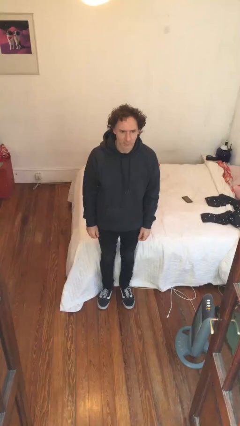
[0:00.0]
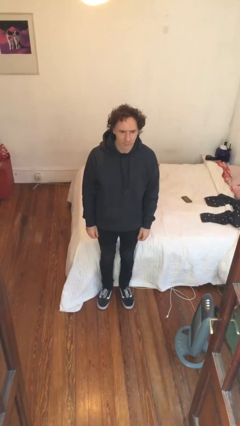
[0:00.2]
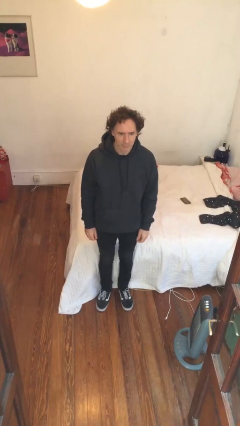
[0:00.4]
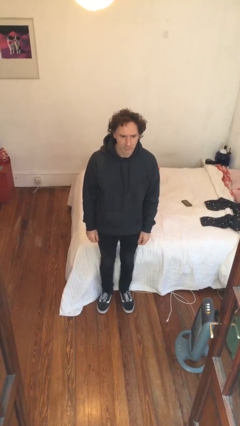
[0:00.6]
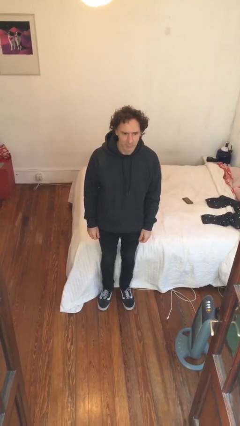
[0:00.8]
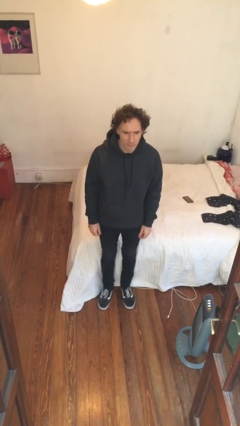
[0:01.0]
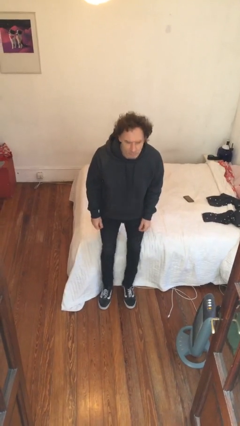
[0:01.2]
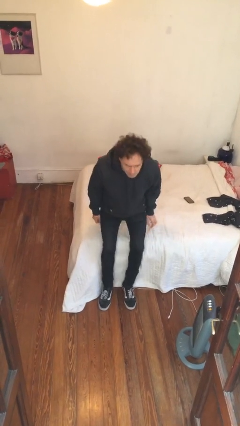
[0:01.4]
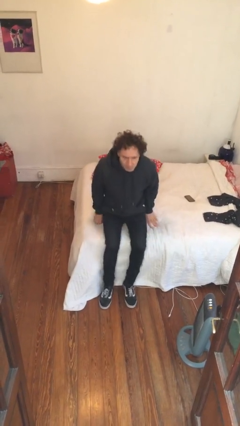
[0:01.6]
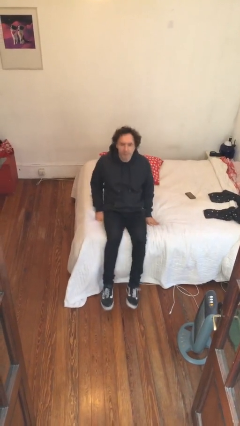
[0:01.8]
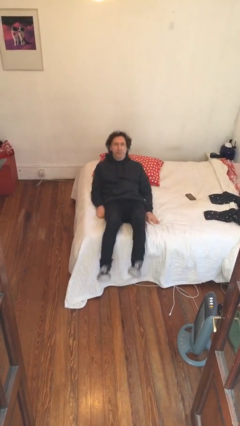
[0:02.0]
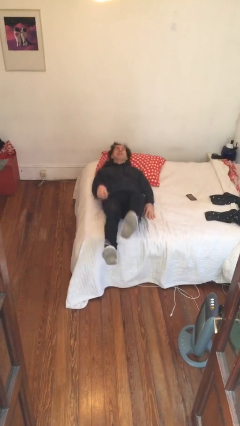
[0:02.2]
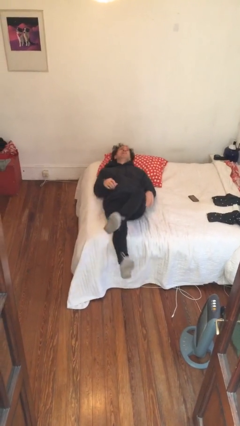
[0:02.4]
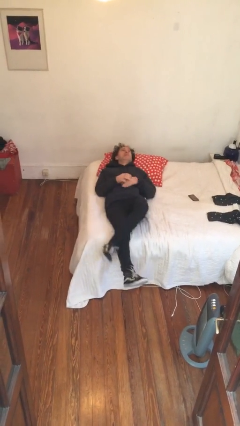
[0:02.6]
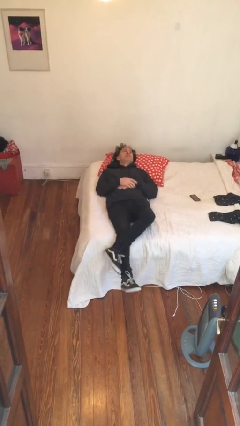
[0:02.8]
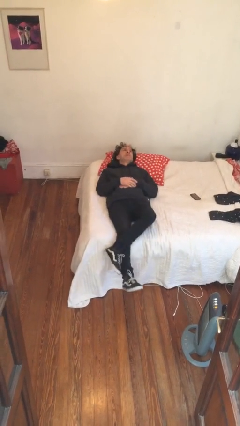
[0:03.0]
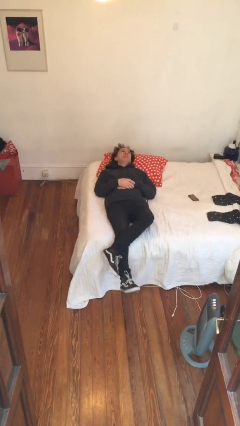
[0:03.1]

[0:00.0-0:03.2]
person lies down on bed

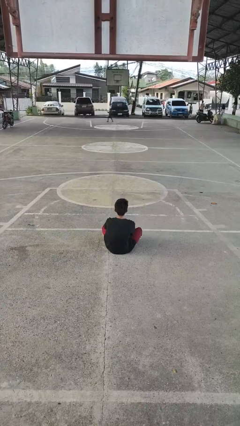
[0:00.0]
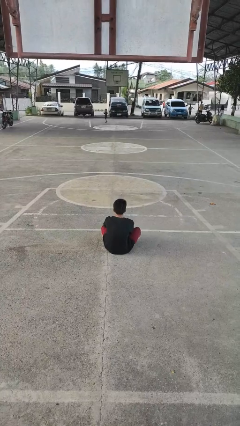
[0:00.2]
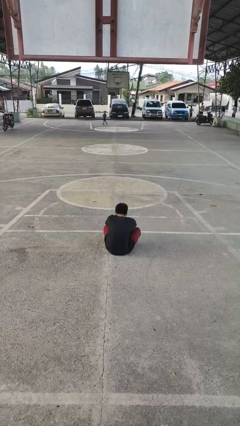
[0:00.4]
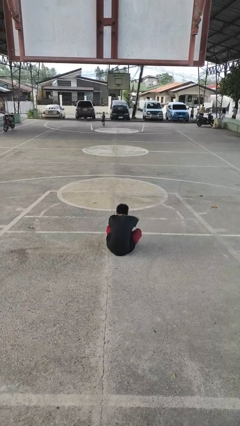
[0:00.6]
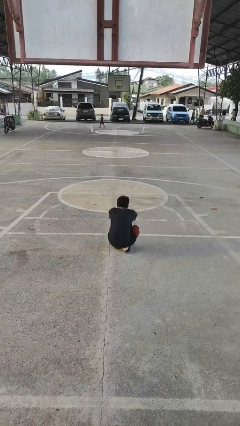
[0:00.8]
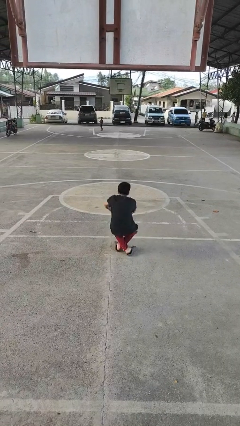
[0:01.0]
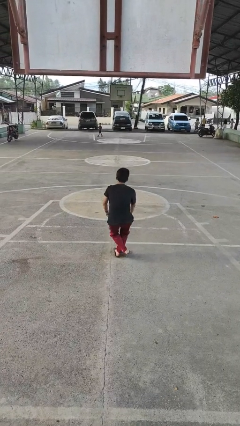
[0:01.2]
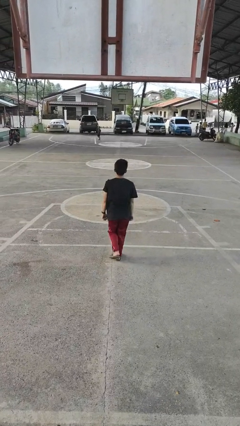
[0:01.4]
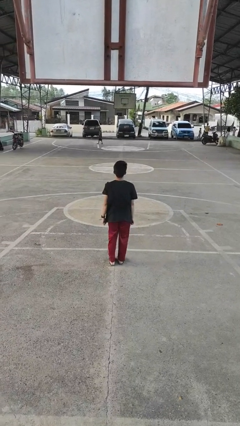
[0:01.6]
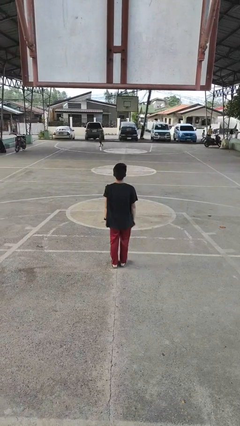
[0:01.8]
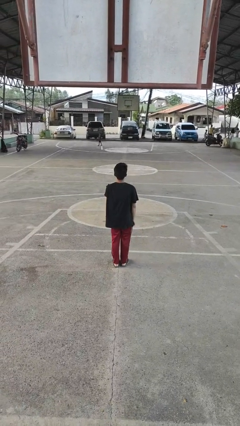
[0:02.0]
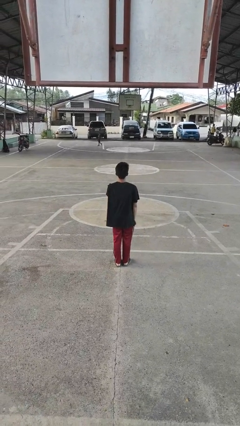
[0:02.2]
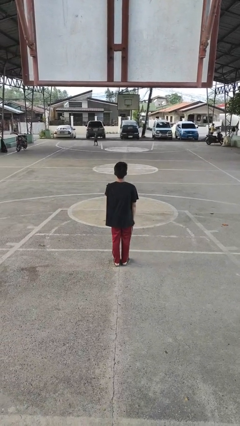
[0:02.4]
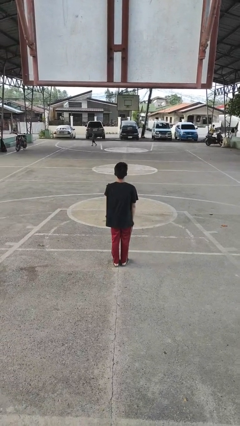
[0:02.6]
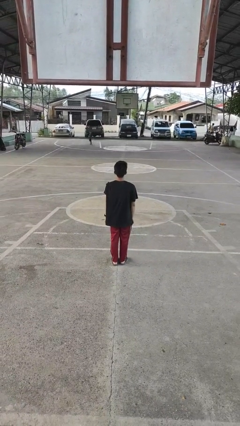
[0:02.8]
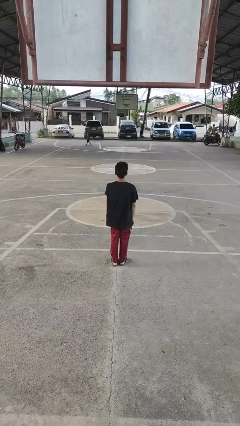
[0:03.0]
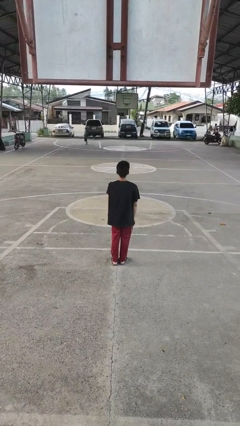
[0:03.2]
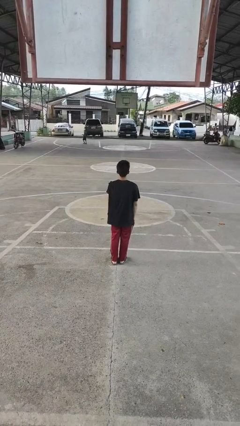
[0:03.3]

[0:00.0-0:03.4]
person stands up from floor

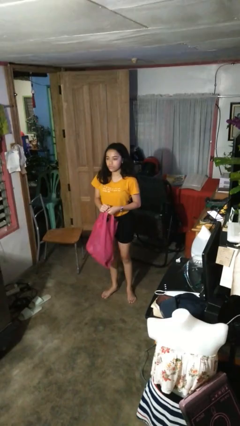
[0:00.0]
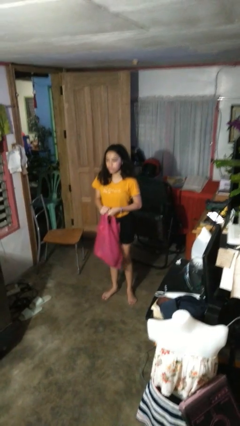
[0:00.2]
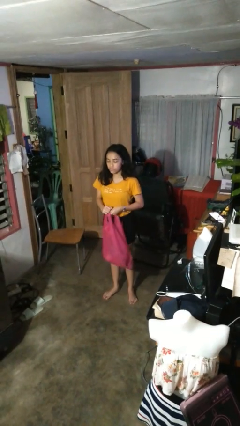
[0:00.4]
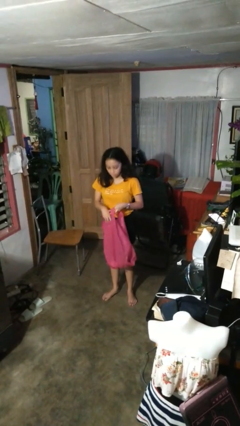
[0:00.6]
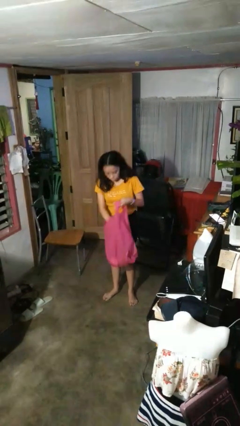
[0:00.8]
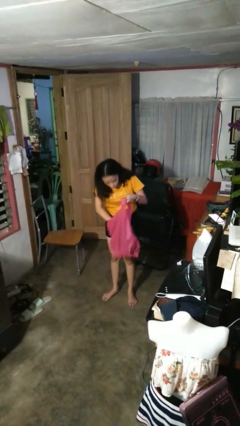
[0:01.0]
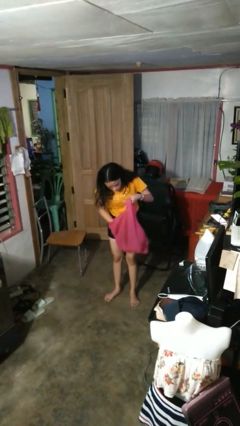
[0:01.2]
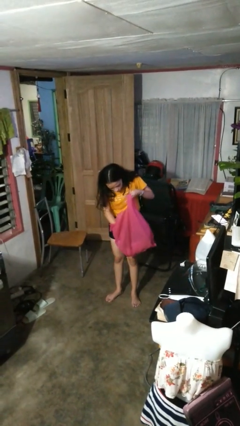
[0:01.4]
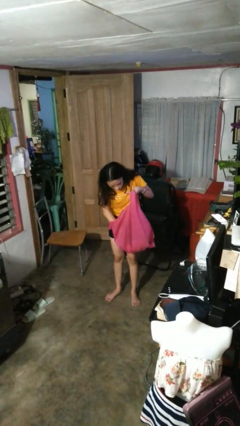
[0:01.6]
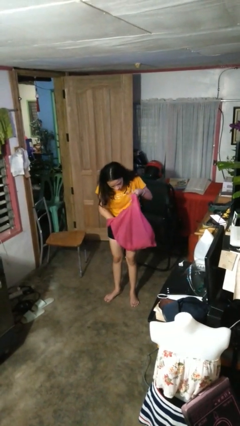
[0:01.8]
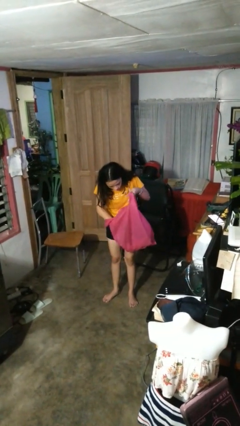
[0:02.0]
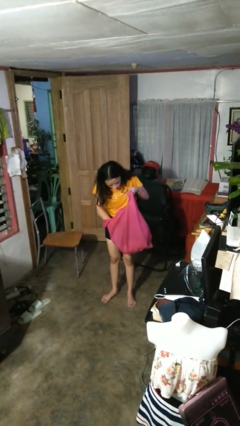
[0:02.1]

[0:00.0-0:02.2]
person searches in bag

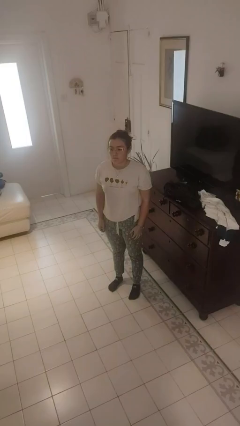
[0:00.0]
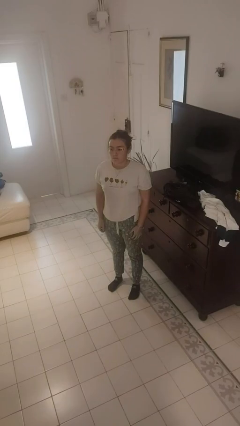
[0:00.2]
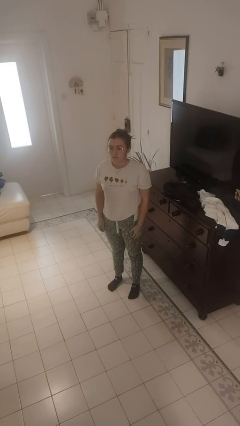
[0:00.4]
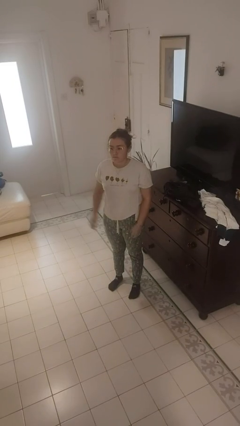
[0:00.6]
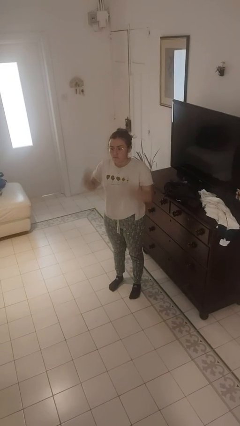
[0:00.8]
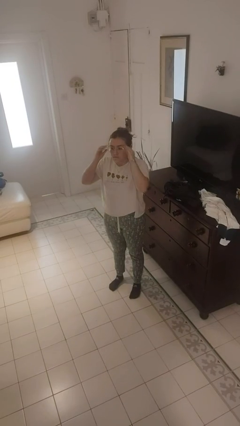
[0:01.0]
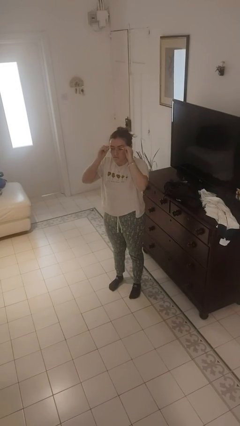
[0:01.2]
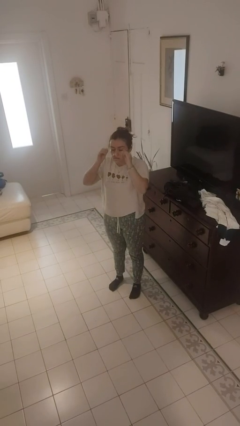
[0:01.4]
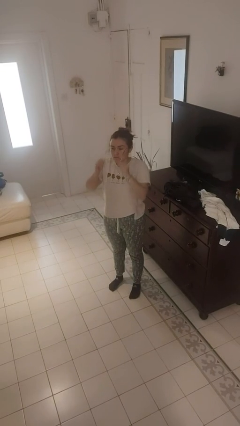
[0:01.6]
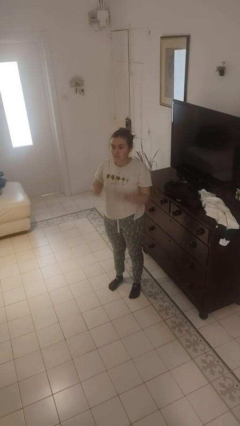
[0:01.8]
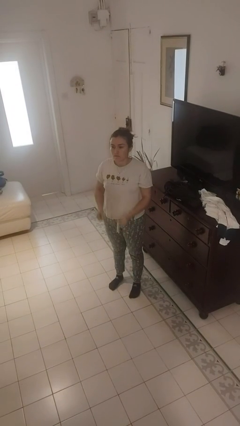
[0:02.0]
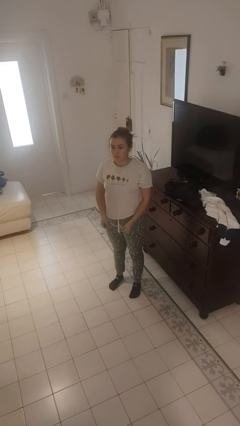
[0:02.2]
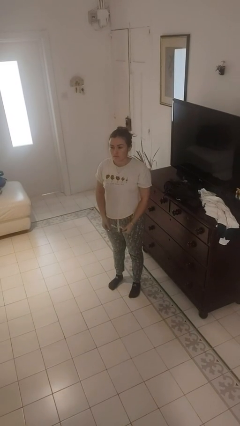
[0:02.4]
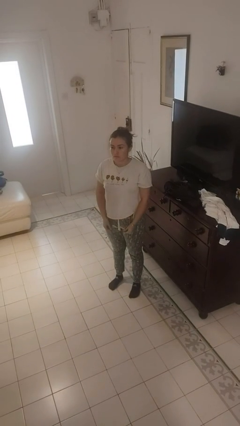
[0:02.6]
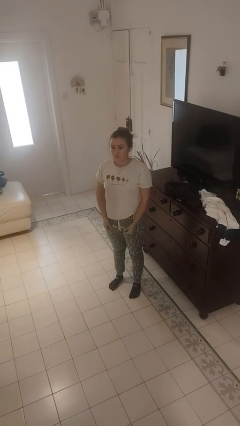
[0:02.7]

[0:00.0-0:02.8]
person takes off glasses

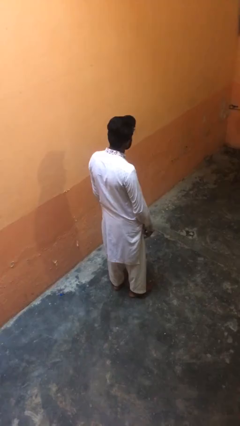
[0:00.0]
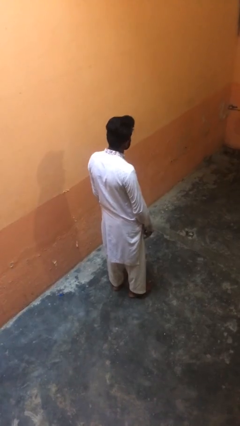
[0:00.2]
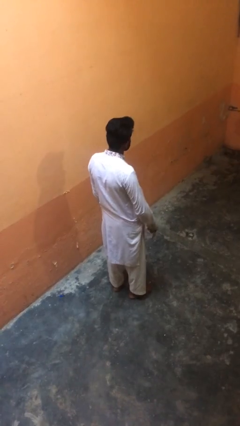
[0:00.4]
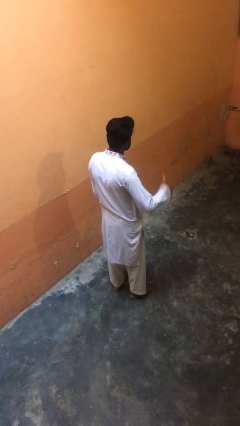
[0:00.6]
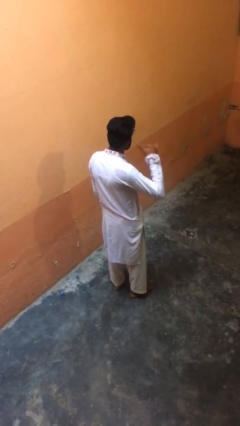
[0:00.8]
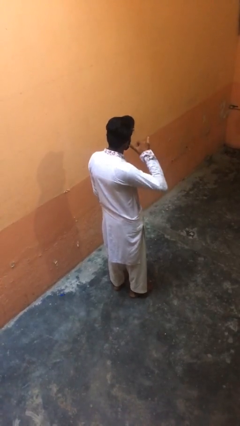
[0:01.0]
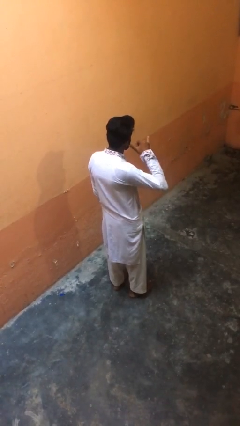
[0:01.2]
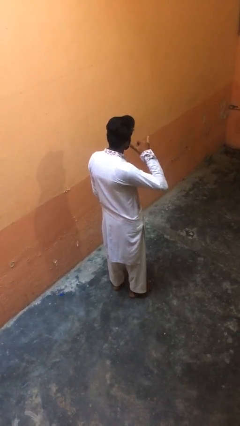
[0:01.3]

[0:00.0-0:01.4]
person gestures call me

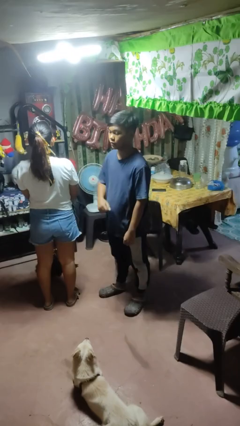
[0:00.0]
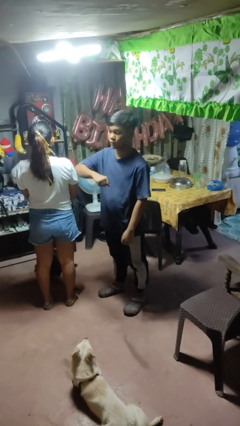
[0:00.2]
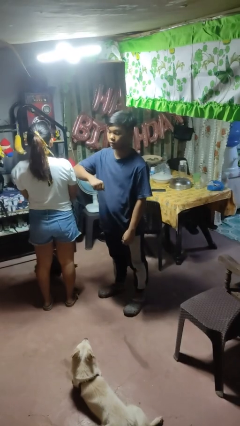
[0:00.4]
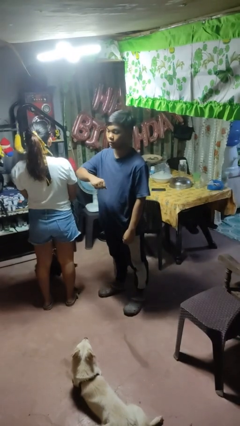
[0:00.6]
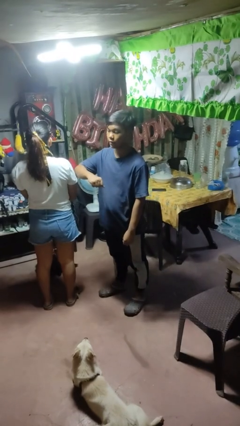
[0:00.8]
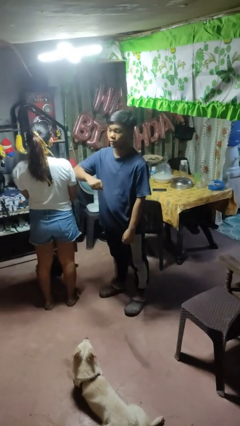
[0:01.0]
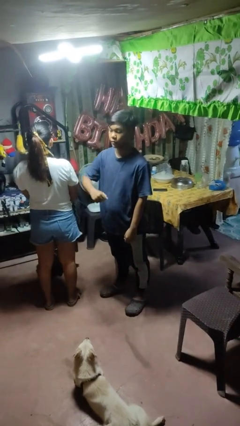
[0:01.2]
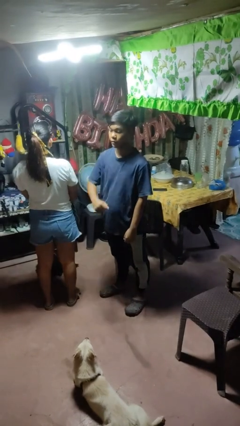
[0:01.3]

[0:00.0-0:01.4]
person nudges person with elbow

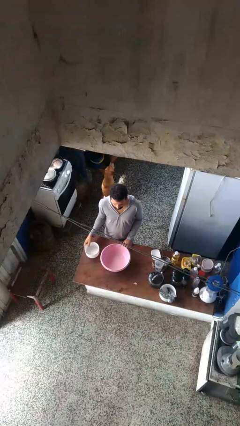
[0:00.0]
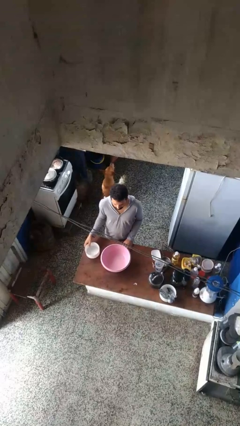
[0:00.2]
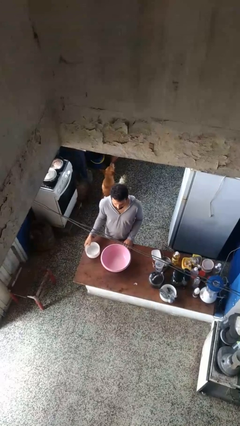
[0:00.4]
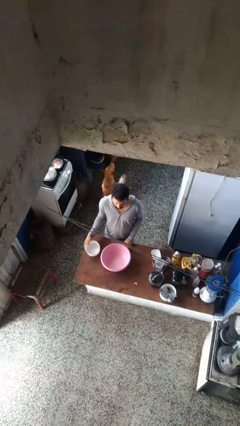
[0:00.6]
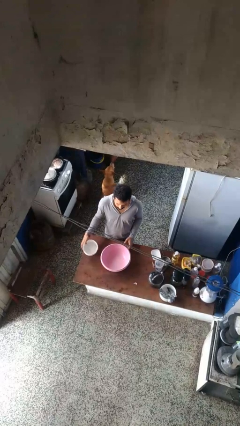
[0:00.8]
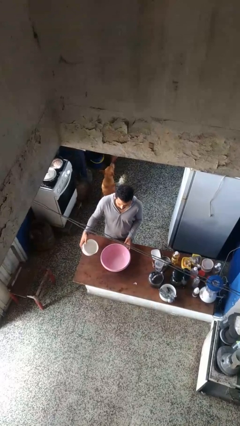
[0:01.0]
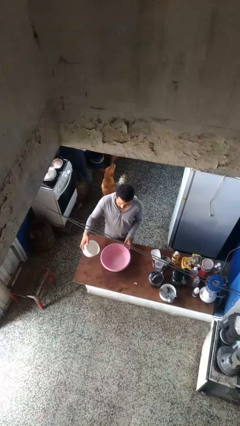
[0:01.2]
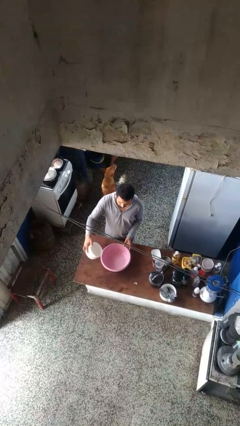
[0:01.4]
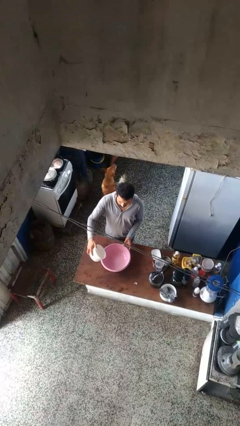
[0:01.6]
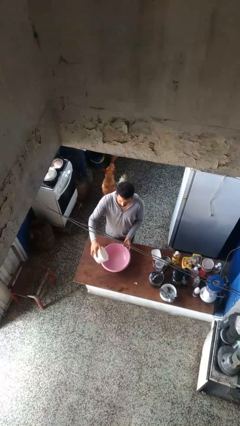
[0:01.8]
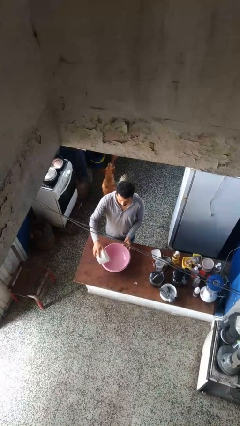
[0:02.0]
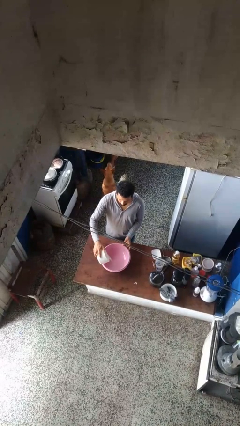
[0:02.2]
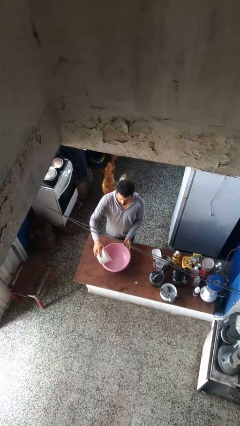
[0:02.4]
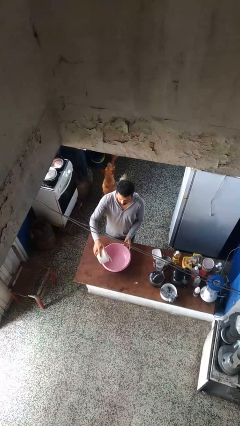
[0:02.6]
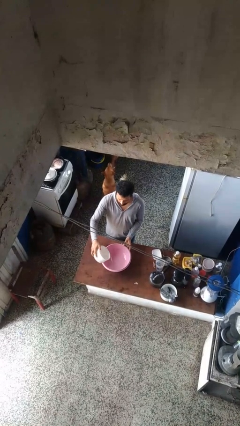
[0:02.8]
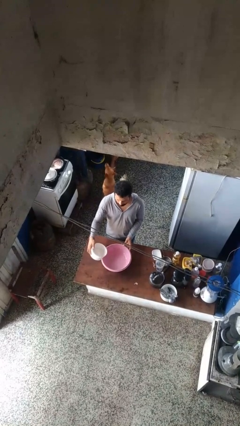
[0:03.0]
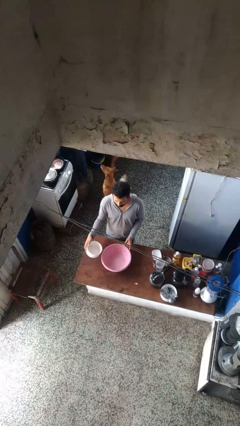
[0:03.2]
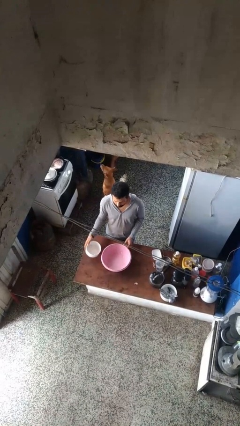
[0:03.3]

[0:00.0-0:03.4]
person pours into bowl
